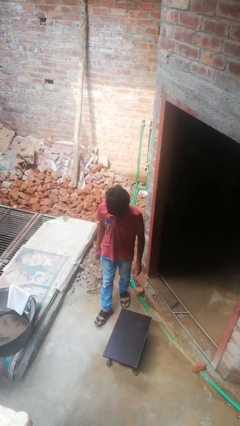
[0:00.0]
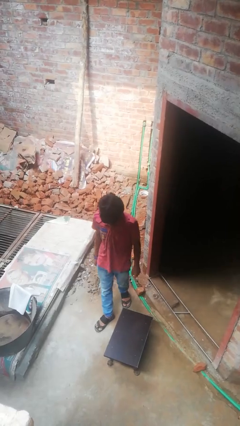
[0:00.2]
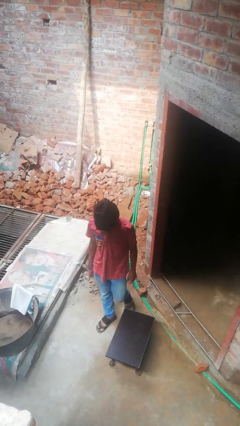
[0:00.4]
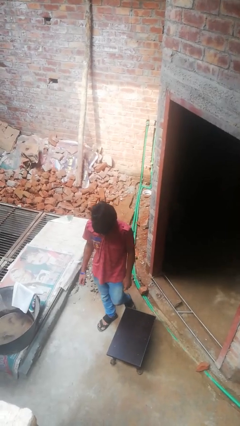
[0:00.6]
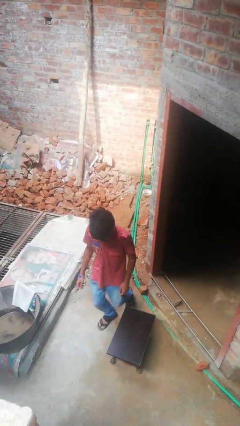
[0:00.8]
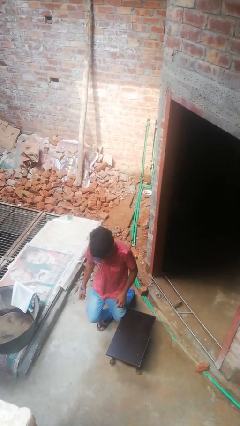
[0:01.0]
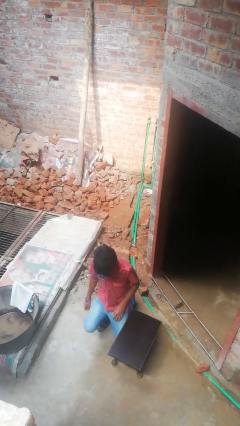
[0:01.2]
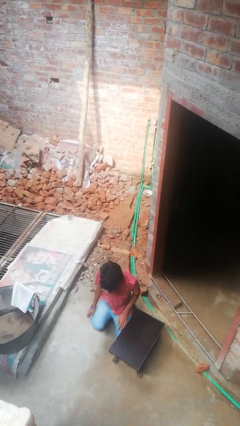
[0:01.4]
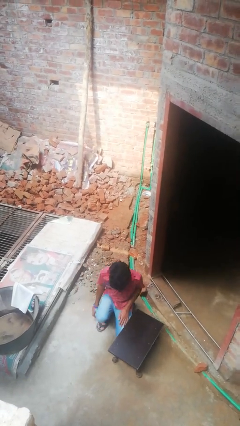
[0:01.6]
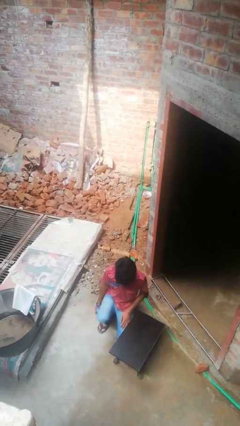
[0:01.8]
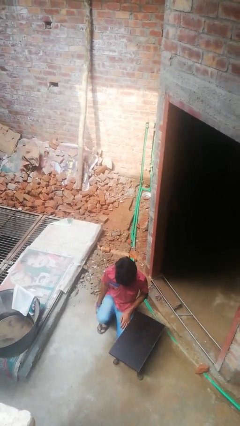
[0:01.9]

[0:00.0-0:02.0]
person lies down on floor

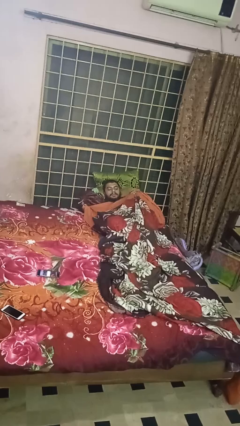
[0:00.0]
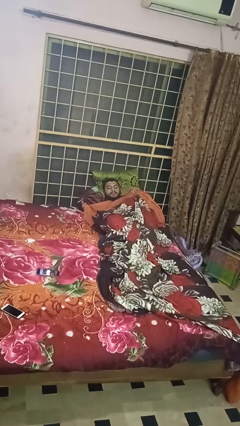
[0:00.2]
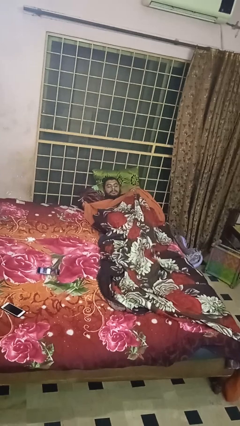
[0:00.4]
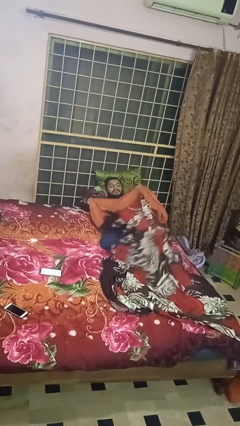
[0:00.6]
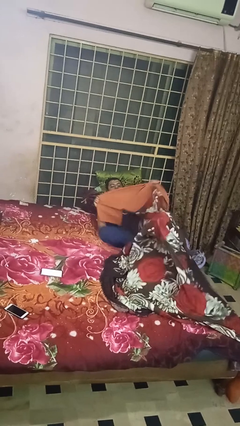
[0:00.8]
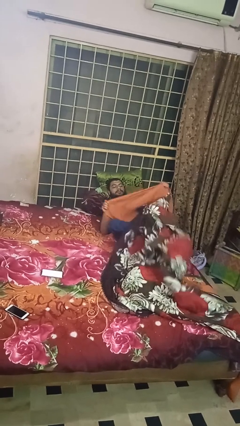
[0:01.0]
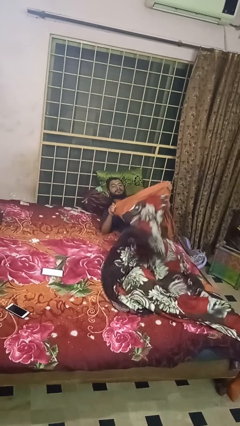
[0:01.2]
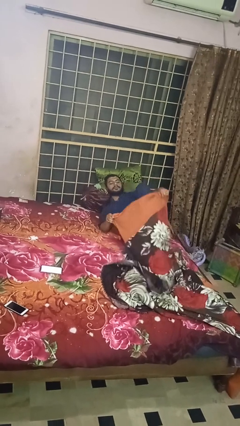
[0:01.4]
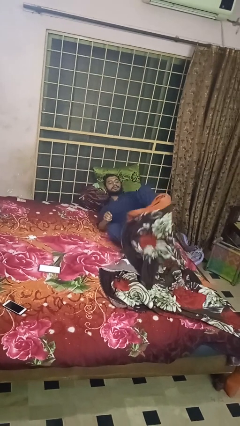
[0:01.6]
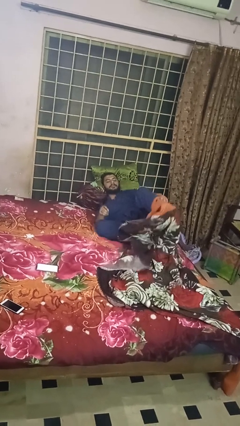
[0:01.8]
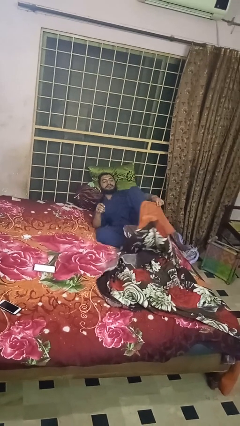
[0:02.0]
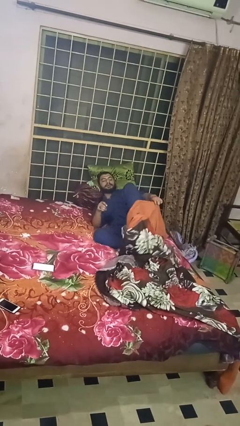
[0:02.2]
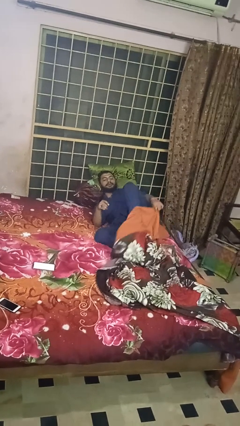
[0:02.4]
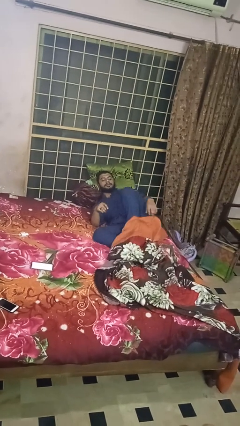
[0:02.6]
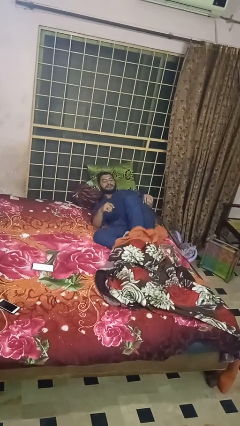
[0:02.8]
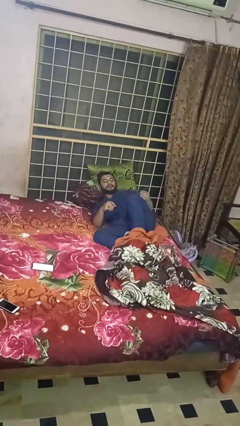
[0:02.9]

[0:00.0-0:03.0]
person uncovers with bedsheets

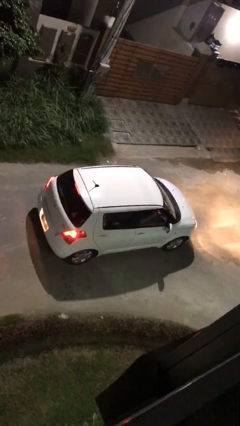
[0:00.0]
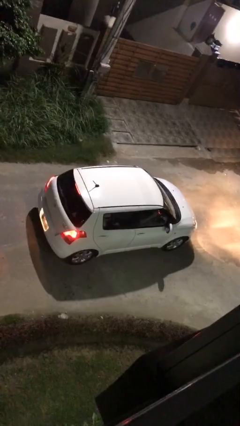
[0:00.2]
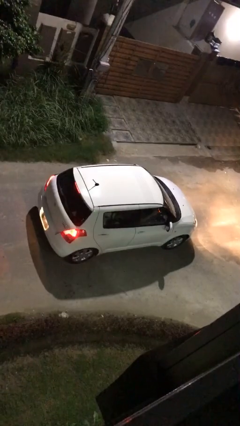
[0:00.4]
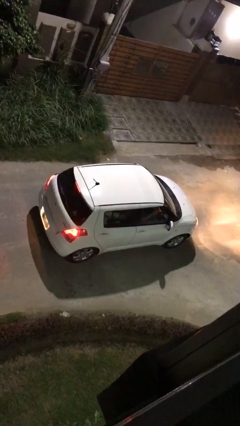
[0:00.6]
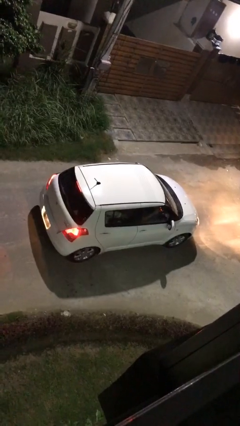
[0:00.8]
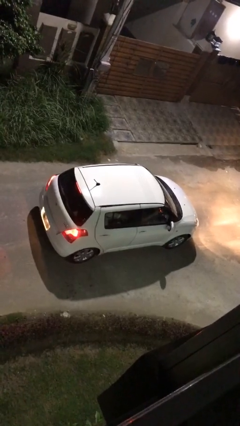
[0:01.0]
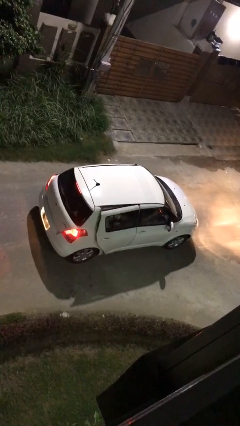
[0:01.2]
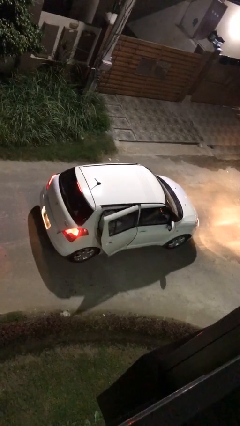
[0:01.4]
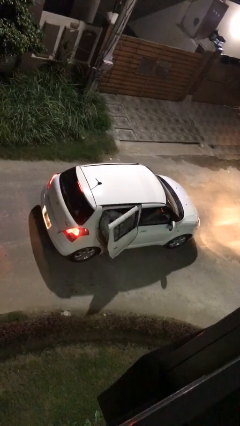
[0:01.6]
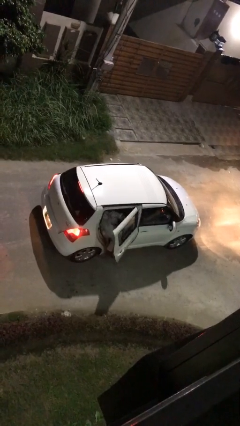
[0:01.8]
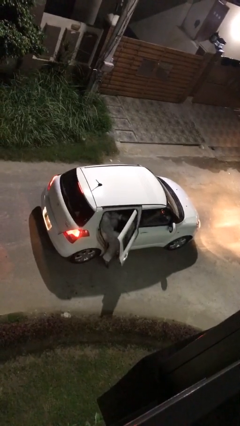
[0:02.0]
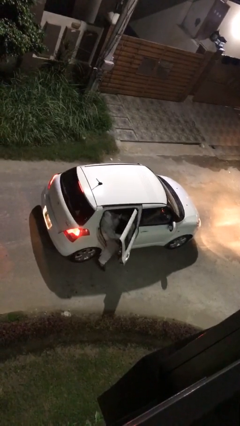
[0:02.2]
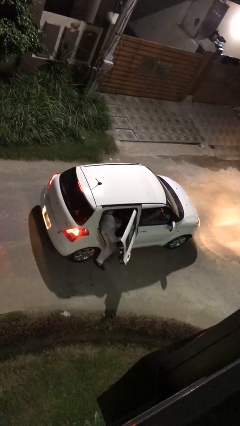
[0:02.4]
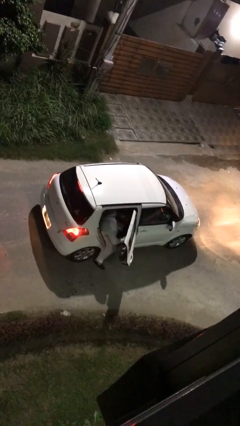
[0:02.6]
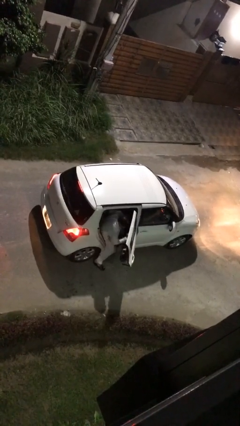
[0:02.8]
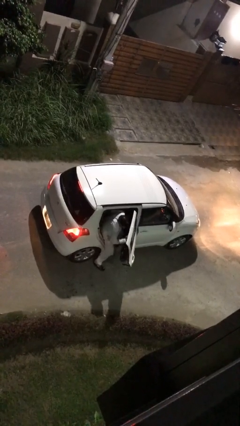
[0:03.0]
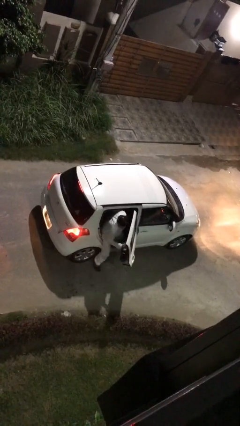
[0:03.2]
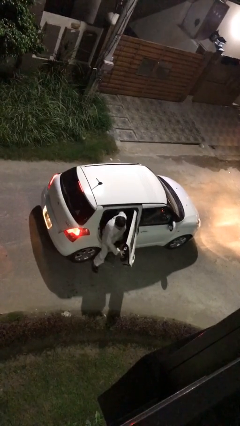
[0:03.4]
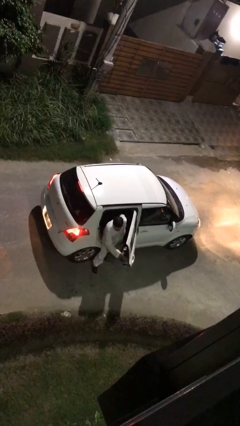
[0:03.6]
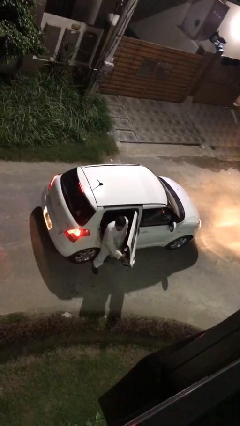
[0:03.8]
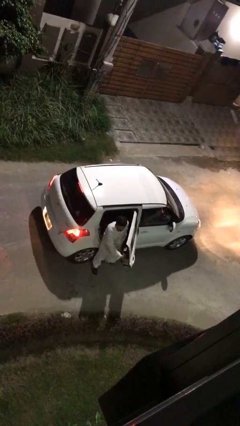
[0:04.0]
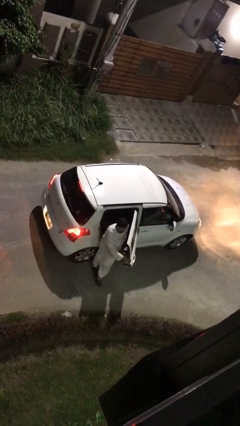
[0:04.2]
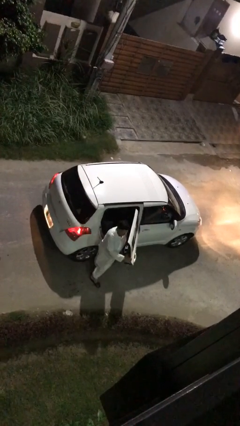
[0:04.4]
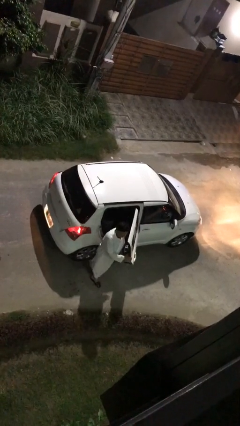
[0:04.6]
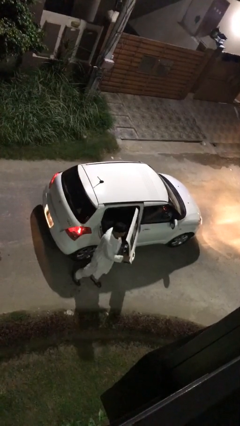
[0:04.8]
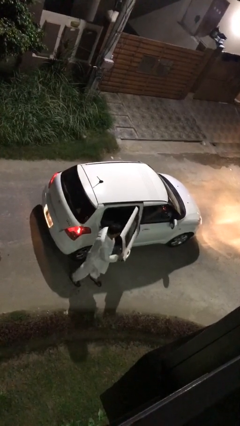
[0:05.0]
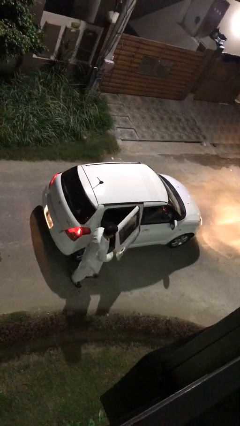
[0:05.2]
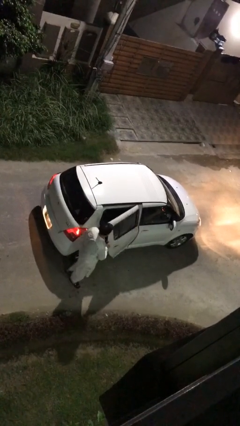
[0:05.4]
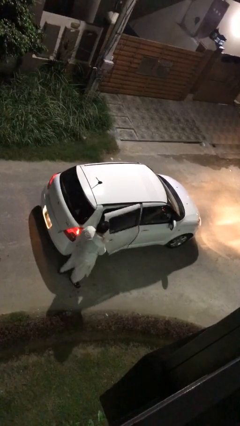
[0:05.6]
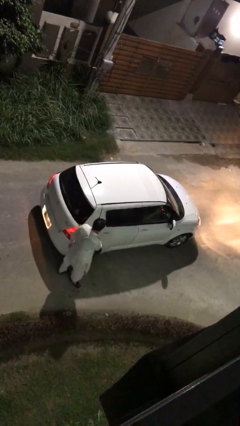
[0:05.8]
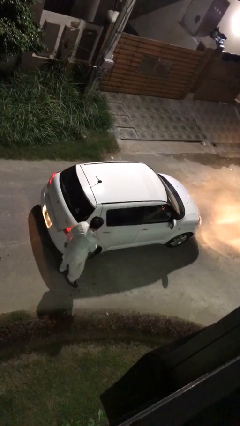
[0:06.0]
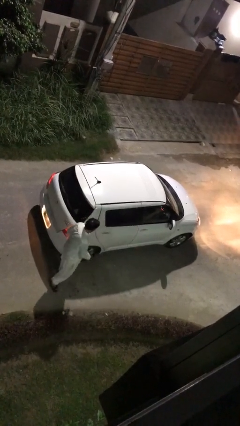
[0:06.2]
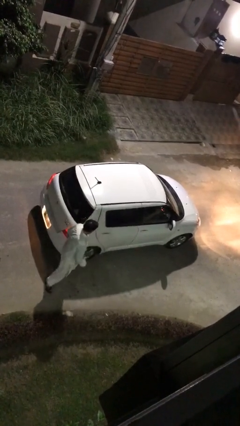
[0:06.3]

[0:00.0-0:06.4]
car picks up person

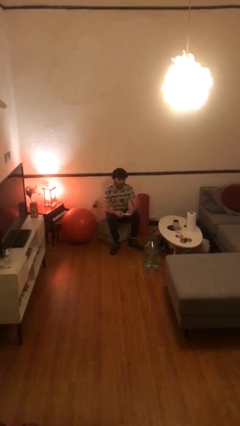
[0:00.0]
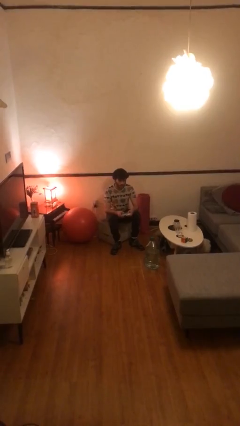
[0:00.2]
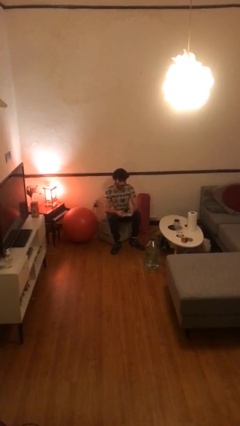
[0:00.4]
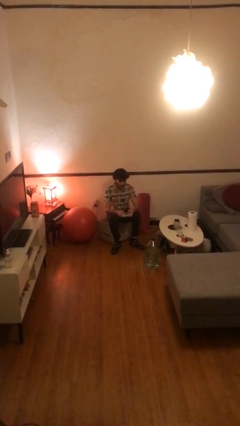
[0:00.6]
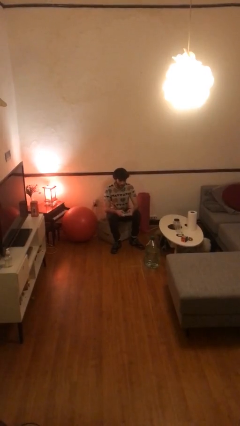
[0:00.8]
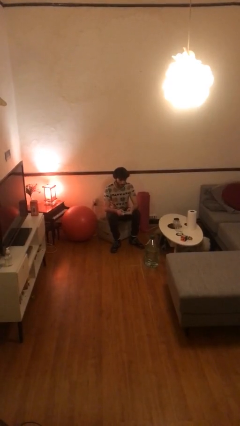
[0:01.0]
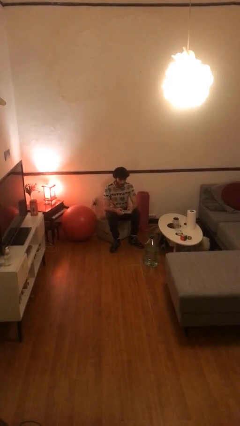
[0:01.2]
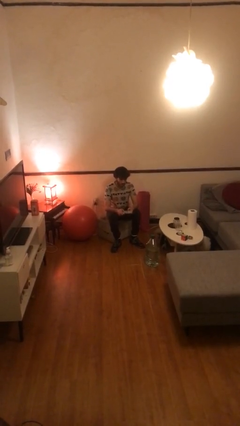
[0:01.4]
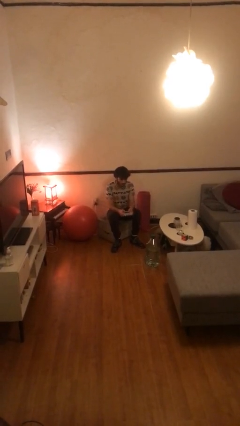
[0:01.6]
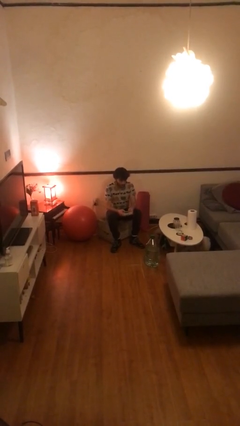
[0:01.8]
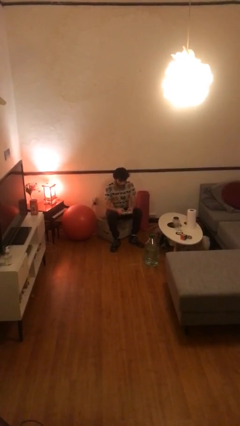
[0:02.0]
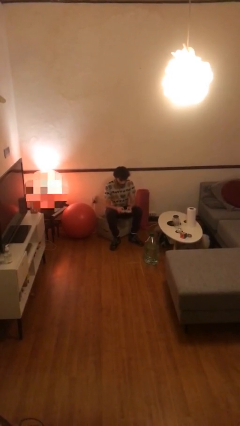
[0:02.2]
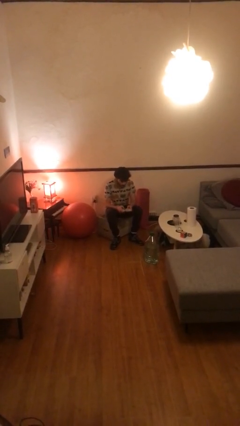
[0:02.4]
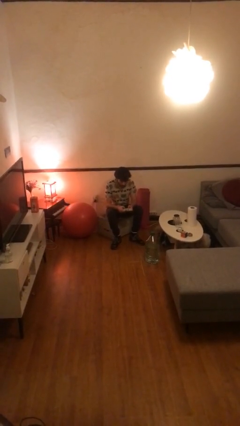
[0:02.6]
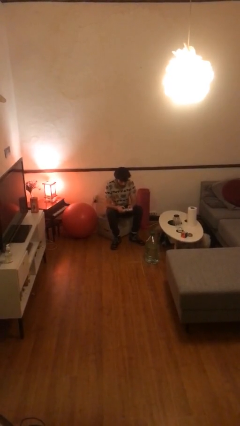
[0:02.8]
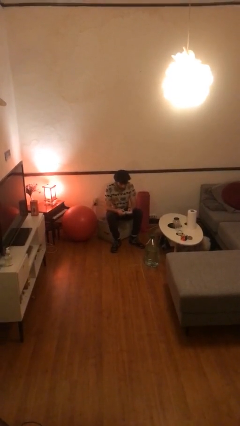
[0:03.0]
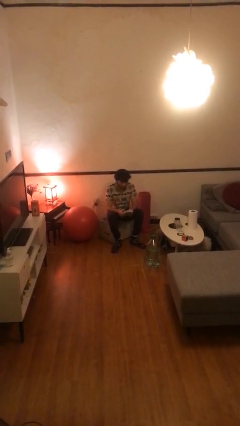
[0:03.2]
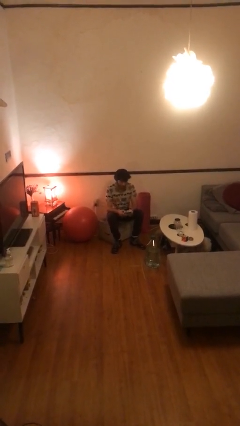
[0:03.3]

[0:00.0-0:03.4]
person interacts with handheld game

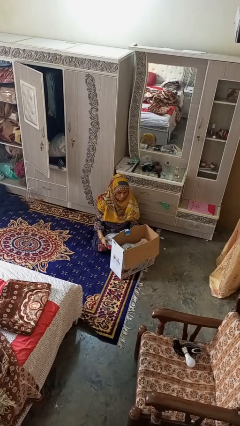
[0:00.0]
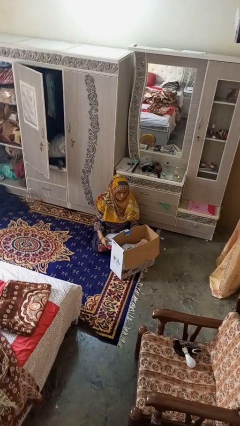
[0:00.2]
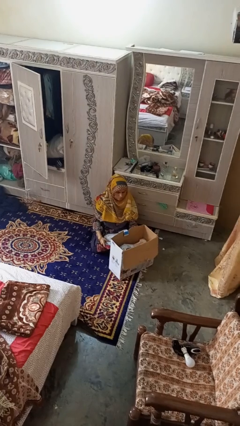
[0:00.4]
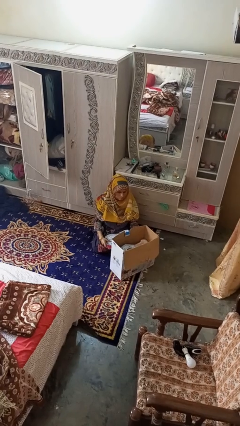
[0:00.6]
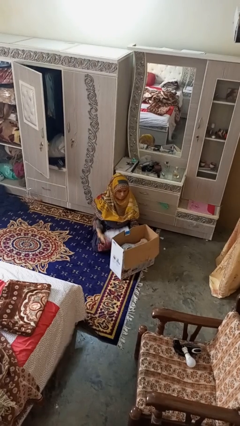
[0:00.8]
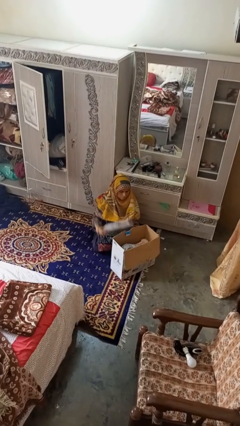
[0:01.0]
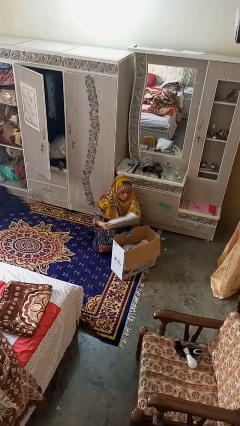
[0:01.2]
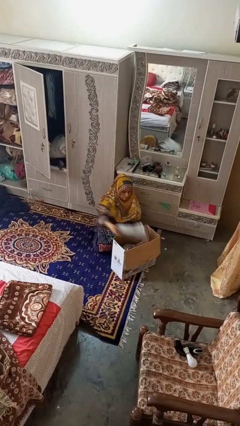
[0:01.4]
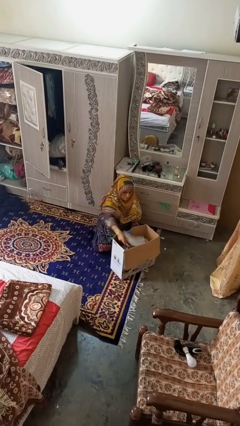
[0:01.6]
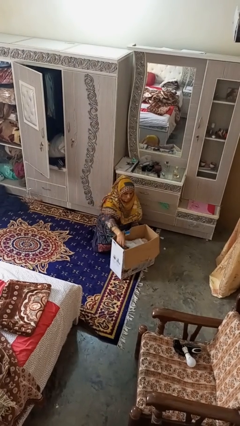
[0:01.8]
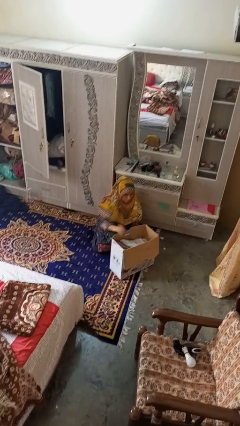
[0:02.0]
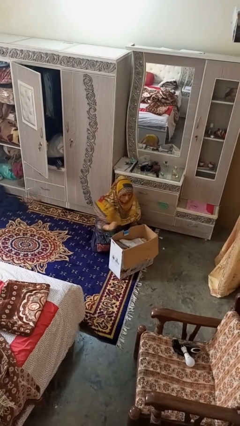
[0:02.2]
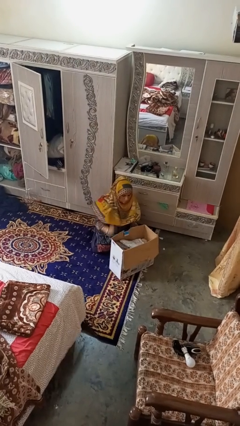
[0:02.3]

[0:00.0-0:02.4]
person puts object into box

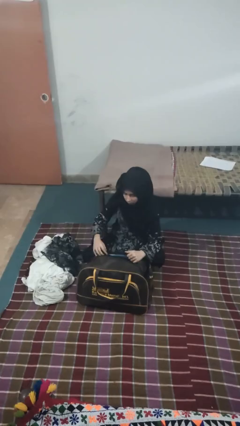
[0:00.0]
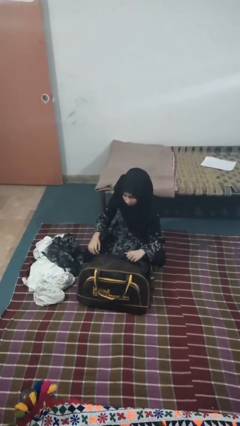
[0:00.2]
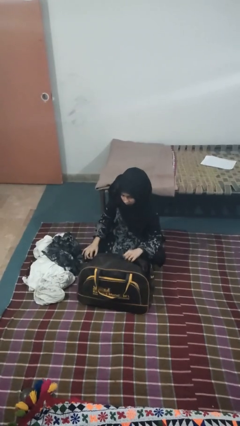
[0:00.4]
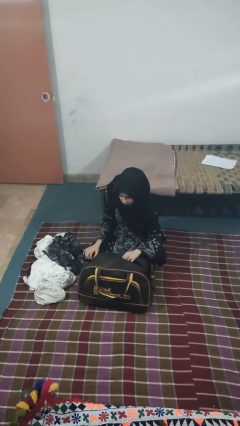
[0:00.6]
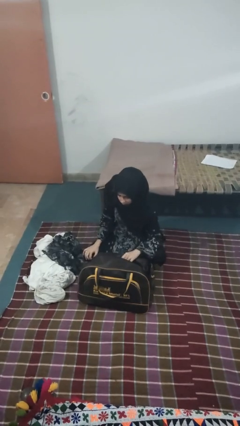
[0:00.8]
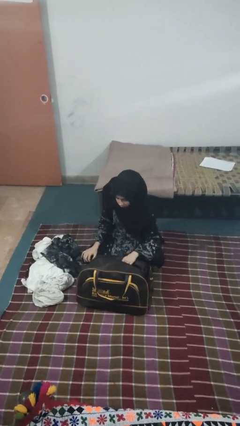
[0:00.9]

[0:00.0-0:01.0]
person loads clothes into suitcase
